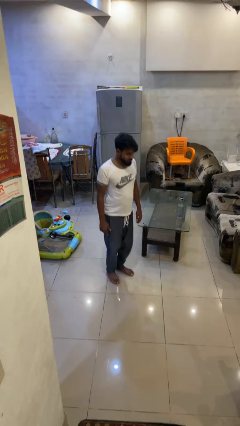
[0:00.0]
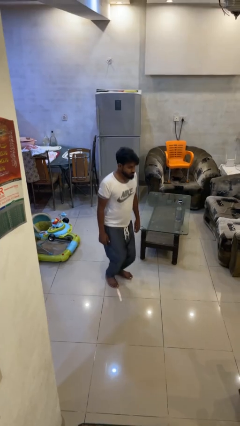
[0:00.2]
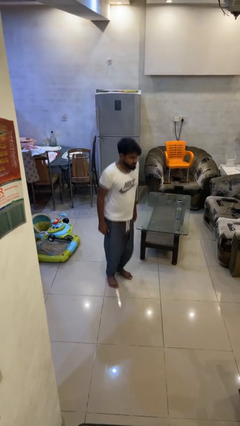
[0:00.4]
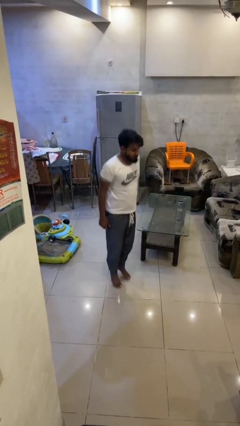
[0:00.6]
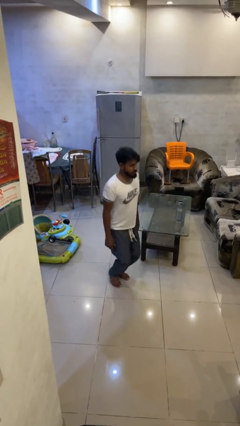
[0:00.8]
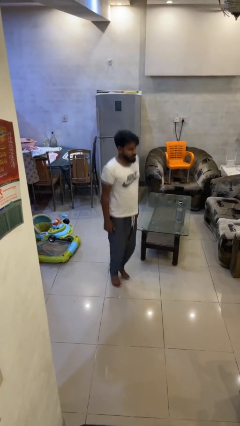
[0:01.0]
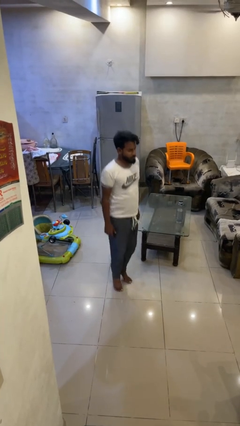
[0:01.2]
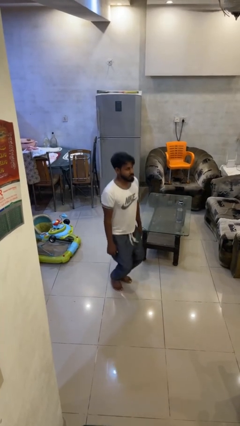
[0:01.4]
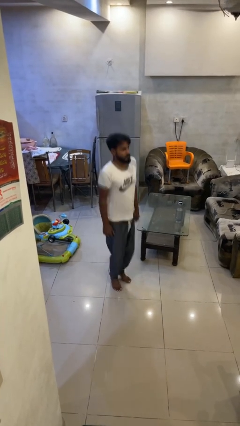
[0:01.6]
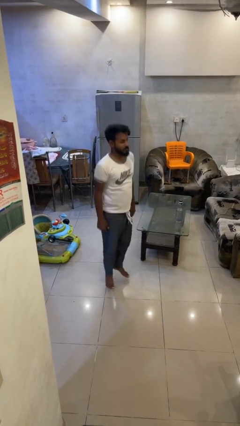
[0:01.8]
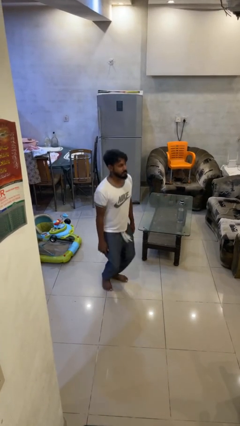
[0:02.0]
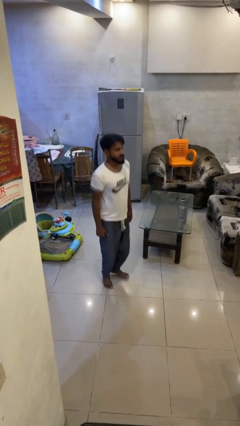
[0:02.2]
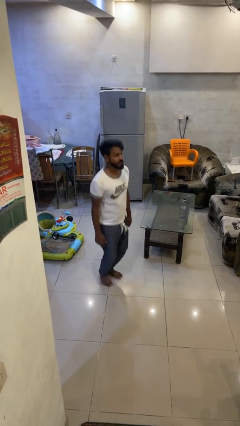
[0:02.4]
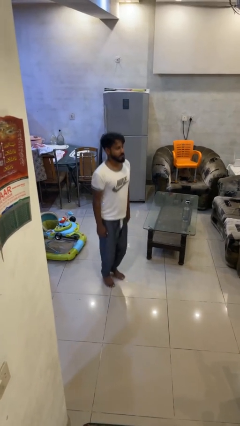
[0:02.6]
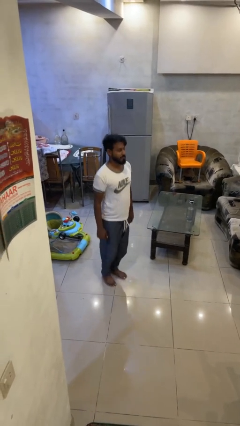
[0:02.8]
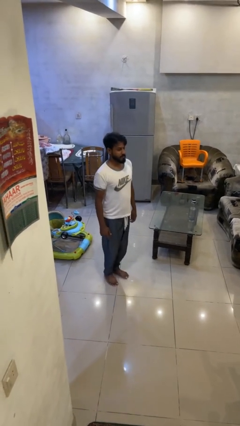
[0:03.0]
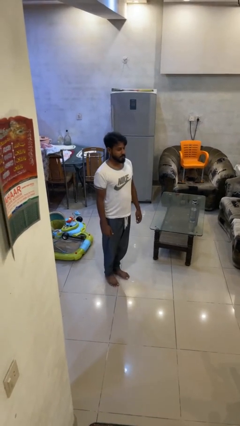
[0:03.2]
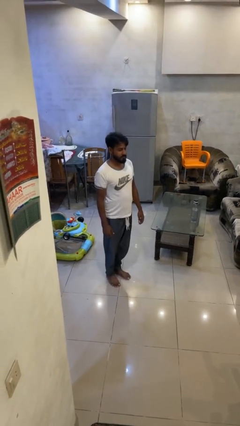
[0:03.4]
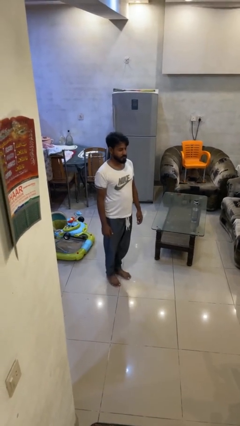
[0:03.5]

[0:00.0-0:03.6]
person jumps

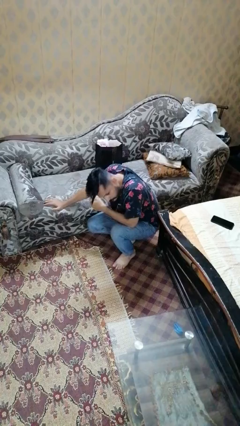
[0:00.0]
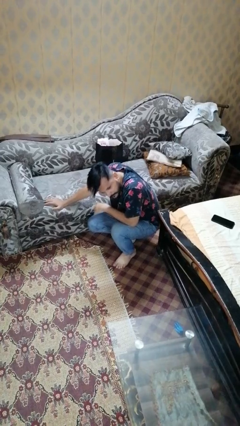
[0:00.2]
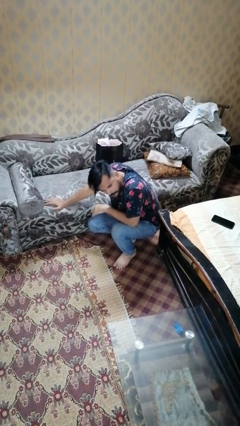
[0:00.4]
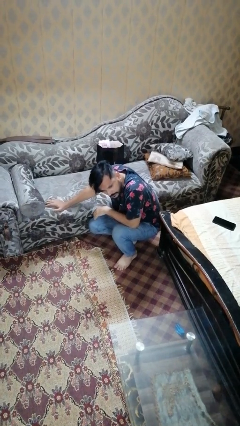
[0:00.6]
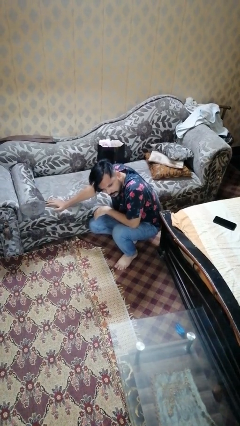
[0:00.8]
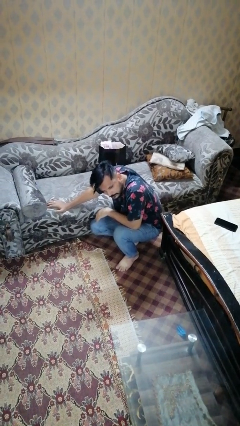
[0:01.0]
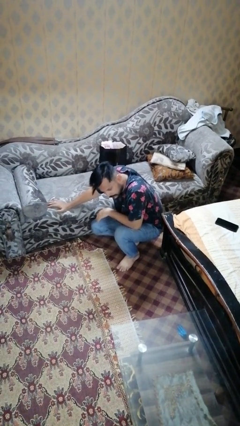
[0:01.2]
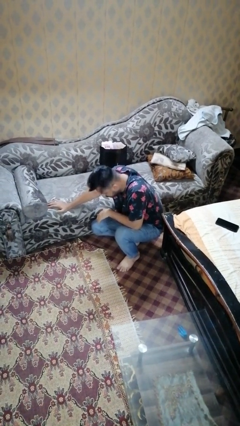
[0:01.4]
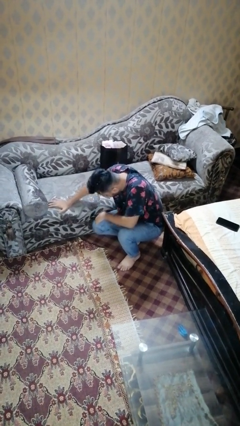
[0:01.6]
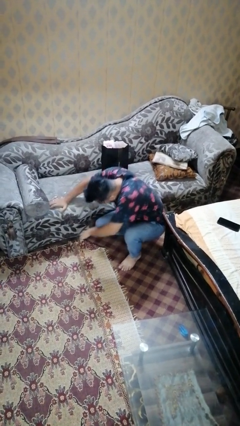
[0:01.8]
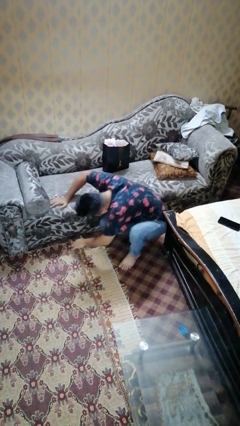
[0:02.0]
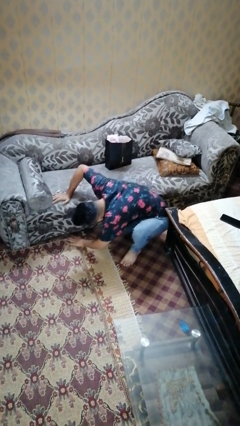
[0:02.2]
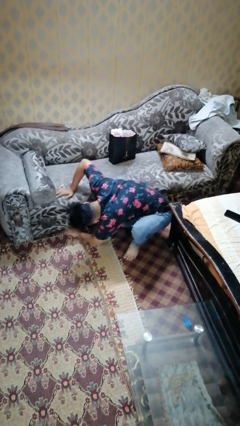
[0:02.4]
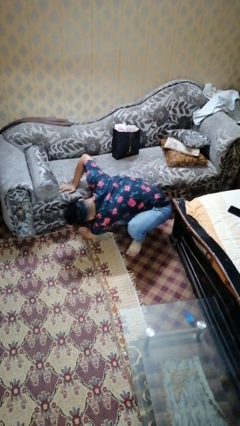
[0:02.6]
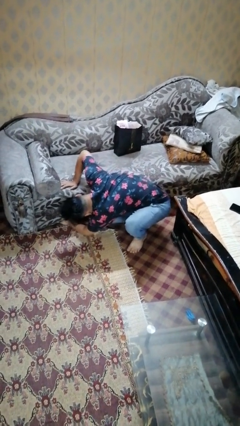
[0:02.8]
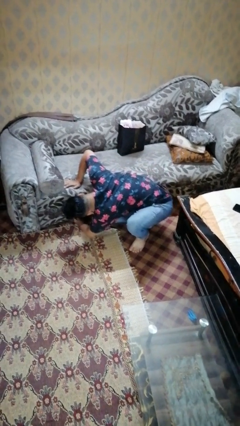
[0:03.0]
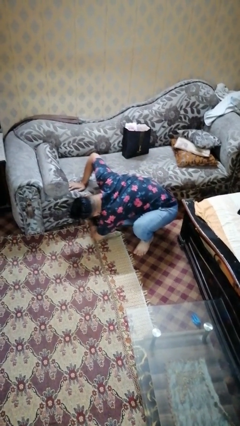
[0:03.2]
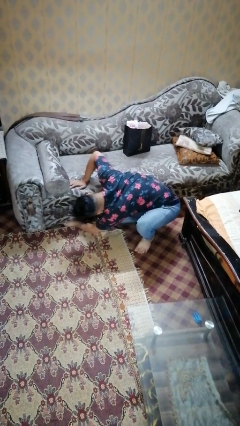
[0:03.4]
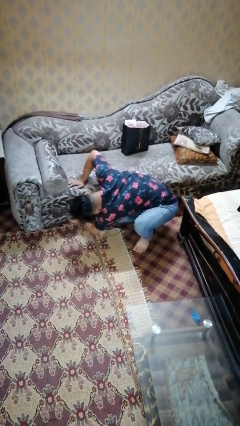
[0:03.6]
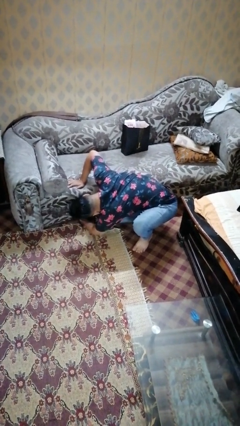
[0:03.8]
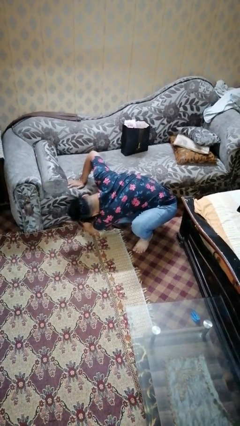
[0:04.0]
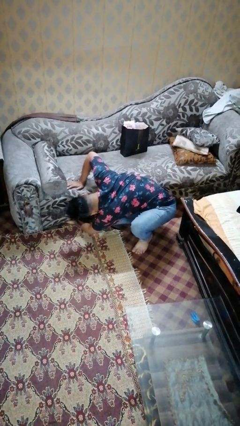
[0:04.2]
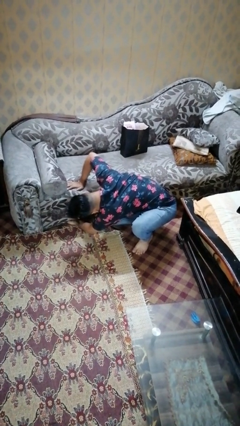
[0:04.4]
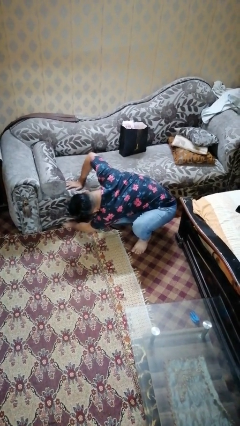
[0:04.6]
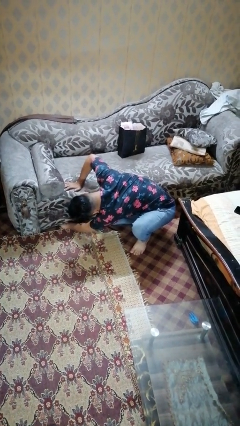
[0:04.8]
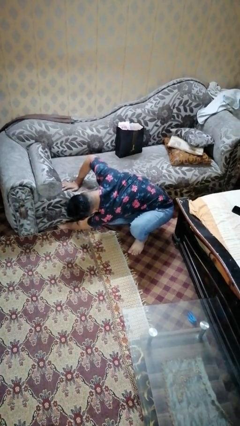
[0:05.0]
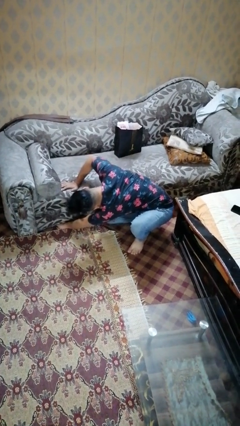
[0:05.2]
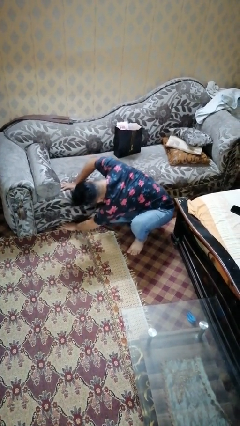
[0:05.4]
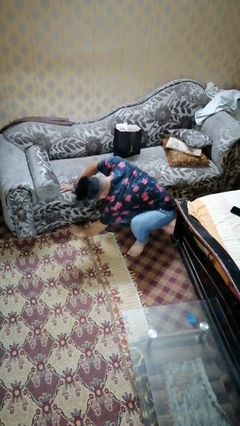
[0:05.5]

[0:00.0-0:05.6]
person searches under couch

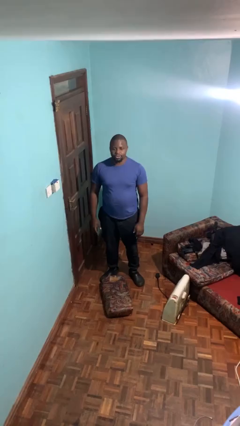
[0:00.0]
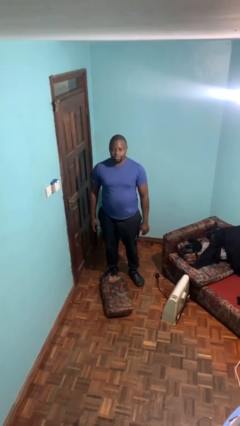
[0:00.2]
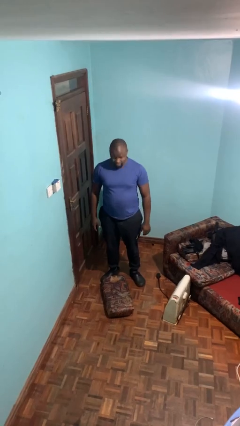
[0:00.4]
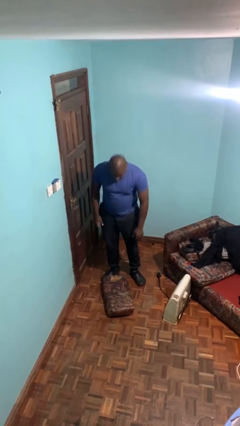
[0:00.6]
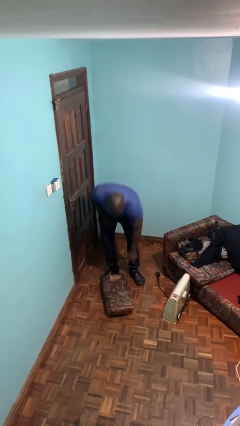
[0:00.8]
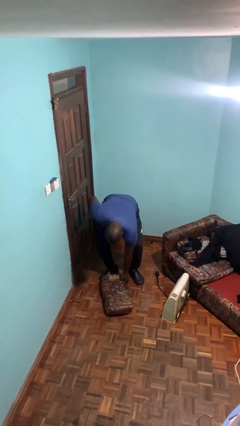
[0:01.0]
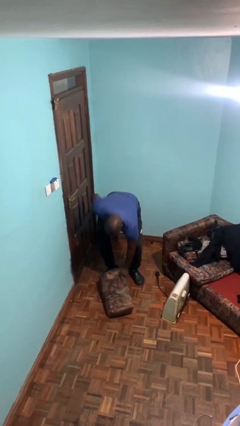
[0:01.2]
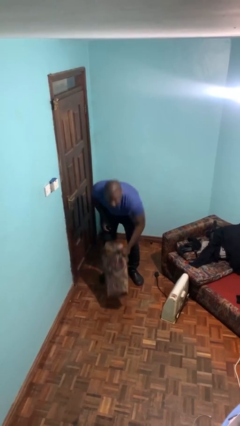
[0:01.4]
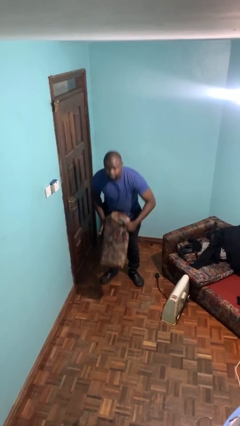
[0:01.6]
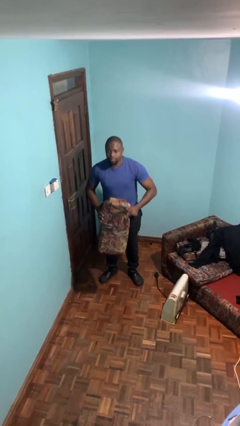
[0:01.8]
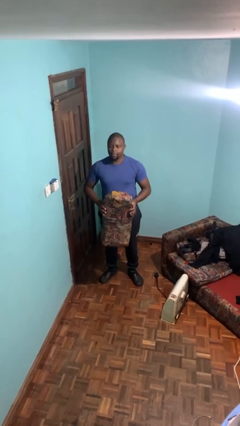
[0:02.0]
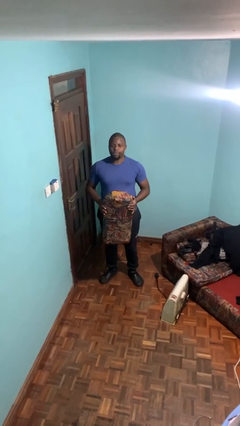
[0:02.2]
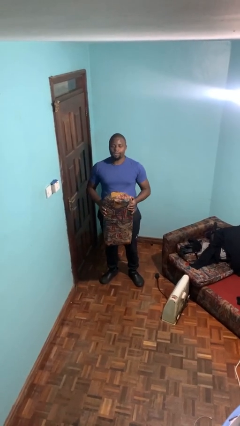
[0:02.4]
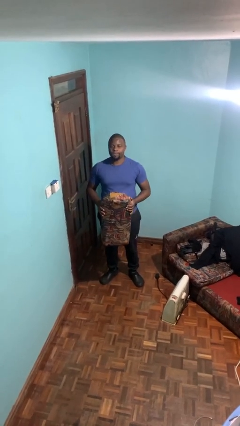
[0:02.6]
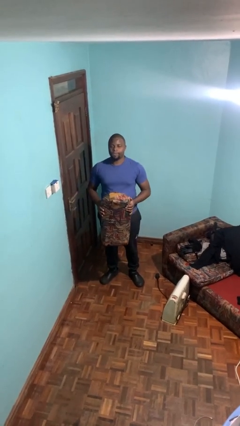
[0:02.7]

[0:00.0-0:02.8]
person picks up object from floor

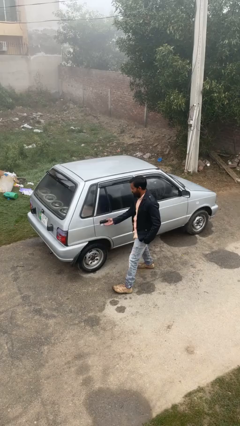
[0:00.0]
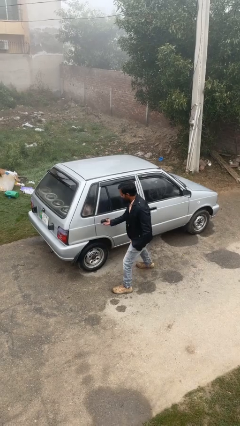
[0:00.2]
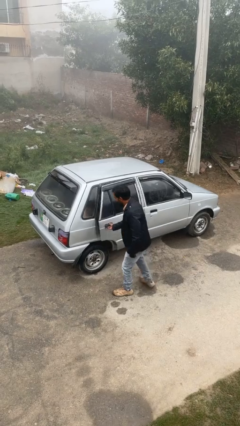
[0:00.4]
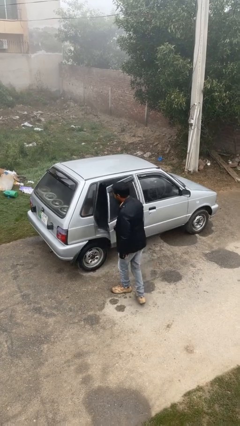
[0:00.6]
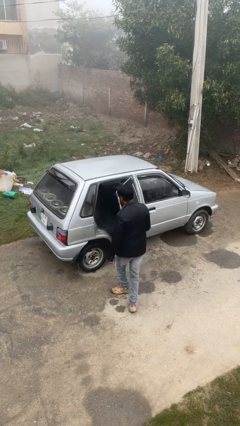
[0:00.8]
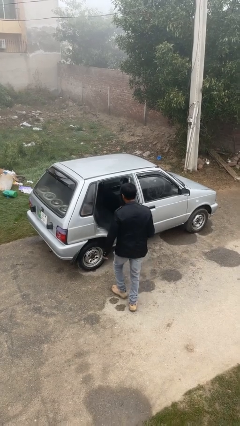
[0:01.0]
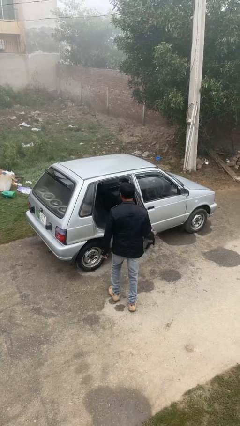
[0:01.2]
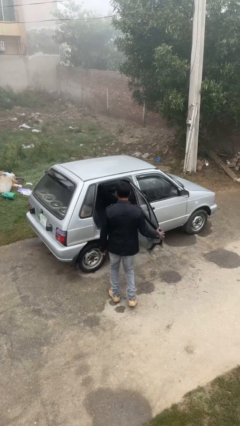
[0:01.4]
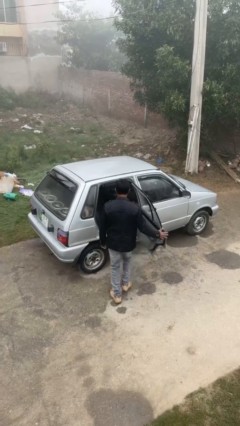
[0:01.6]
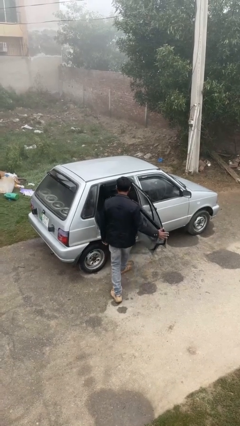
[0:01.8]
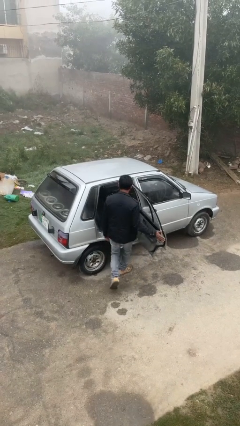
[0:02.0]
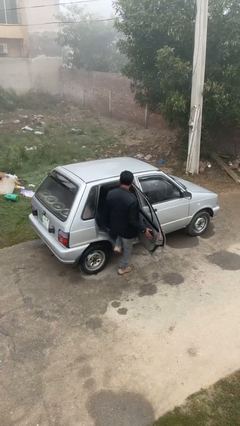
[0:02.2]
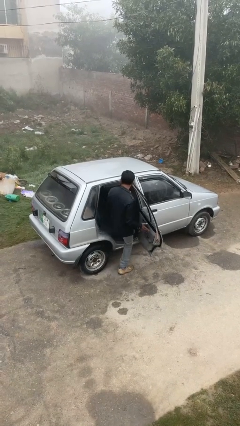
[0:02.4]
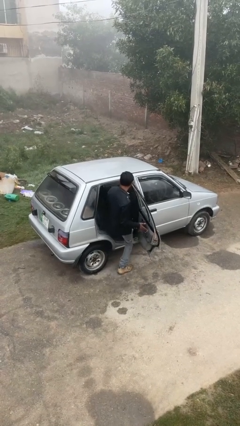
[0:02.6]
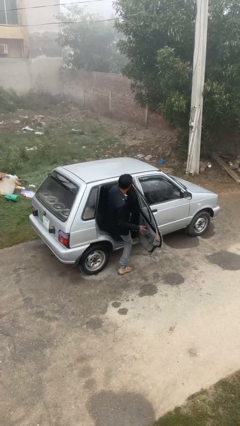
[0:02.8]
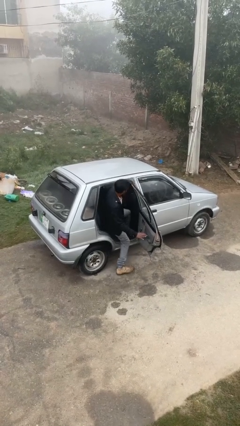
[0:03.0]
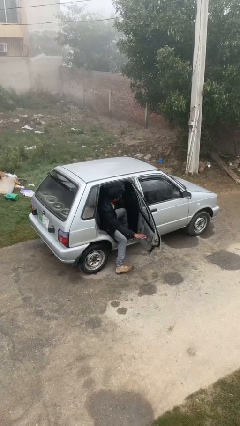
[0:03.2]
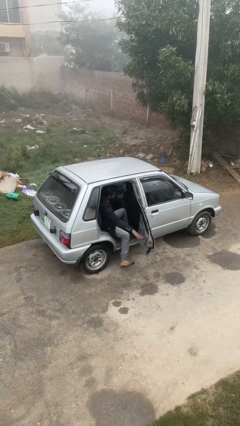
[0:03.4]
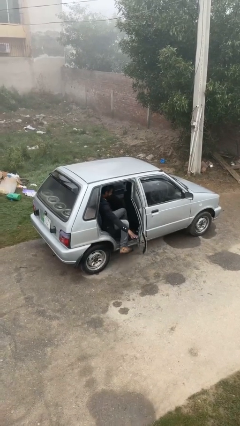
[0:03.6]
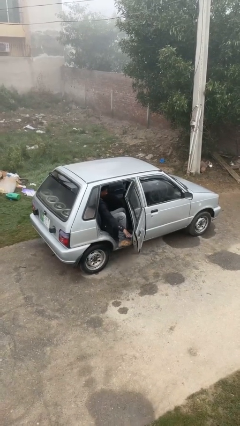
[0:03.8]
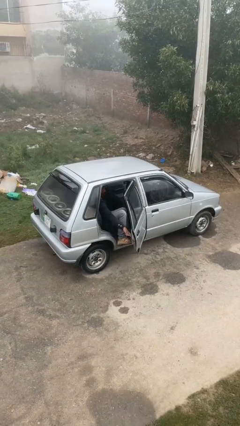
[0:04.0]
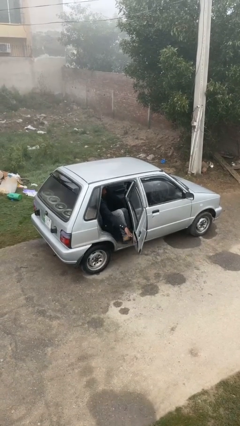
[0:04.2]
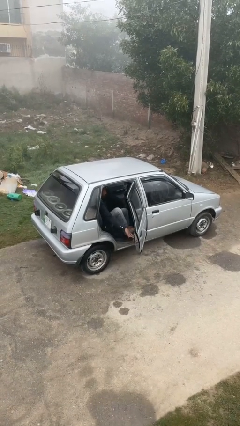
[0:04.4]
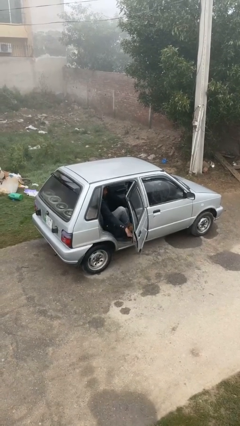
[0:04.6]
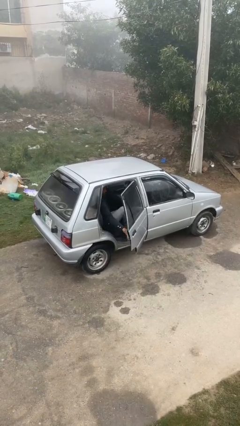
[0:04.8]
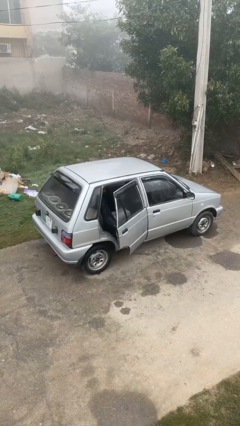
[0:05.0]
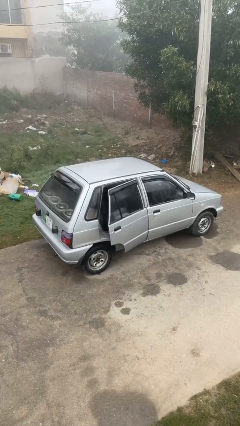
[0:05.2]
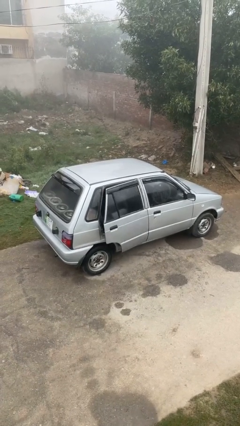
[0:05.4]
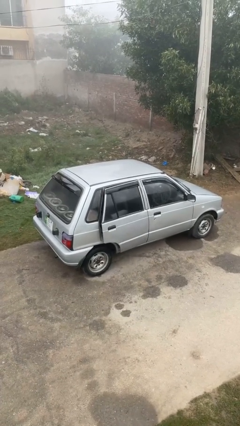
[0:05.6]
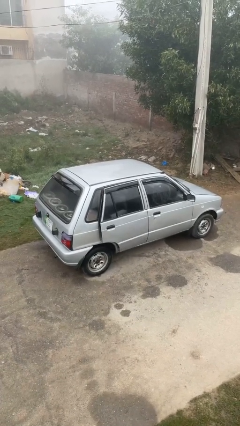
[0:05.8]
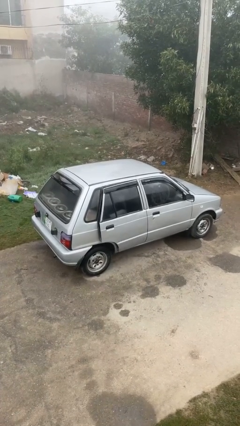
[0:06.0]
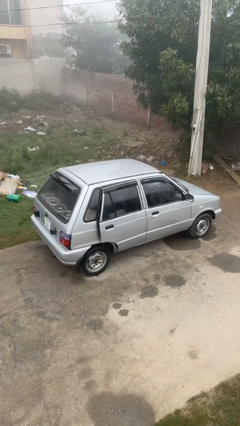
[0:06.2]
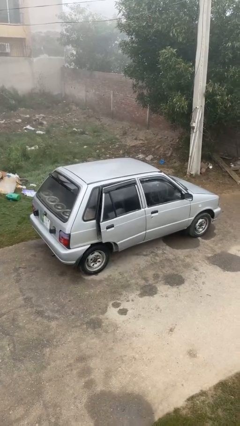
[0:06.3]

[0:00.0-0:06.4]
car picks up person
